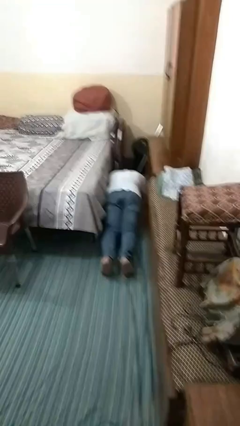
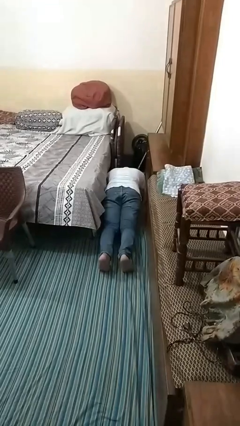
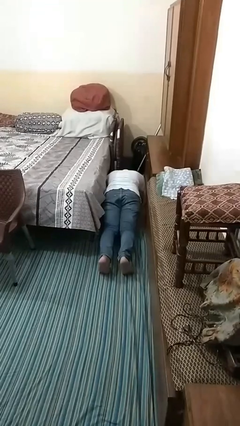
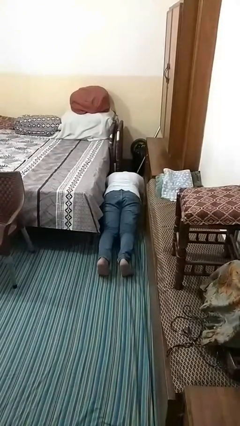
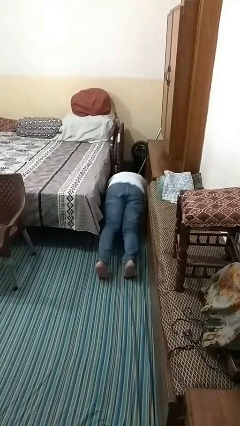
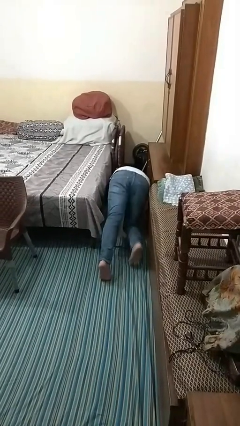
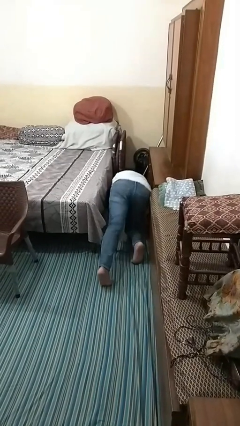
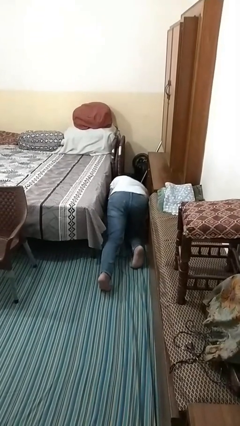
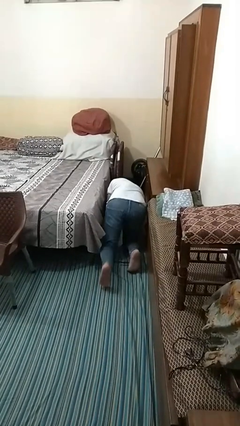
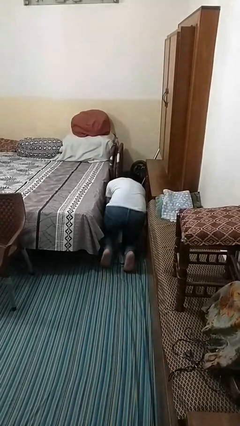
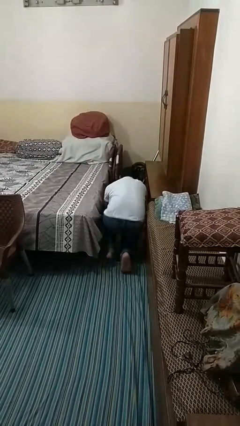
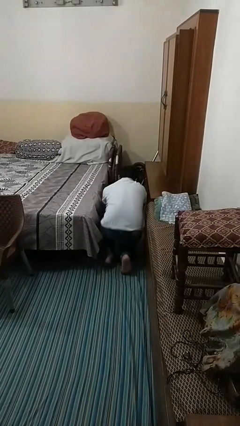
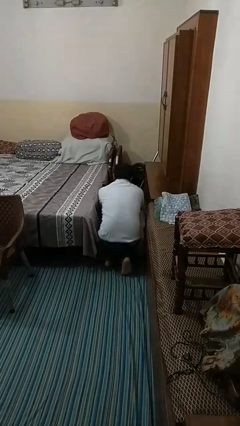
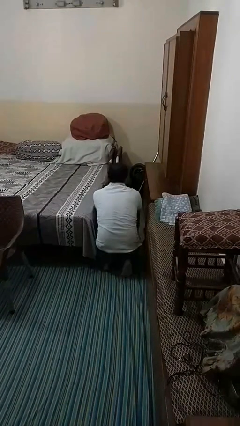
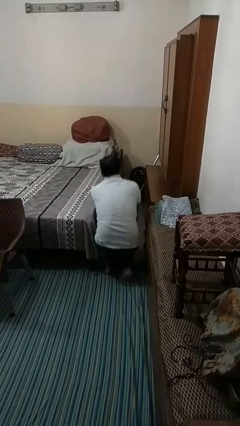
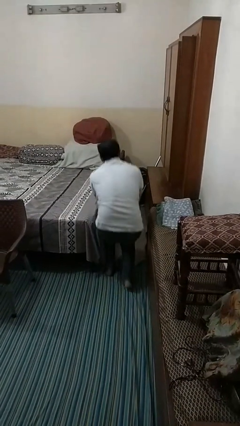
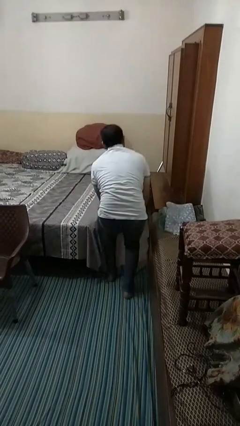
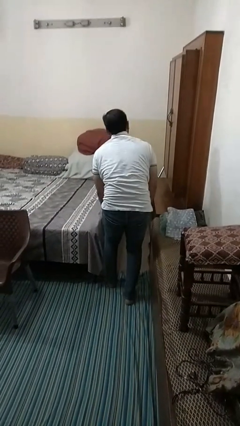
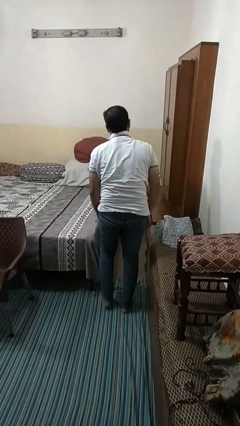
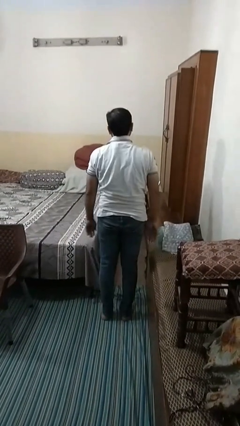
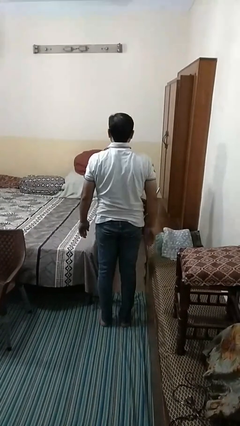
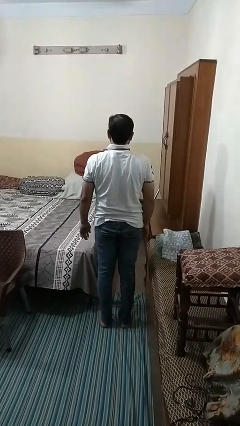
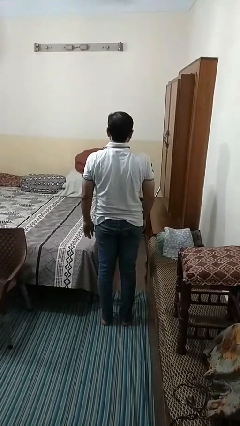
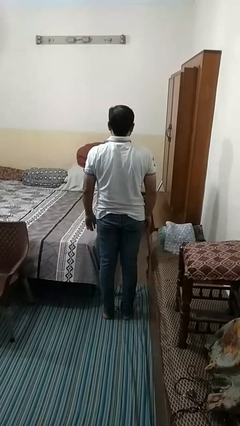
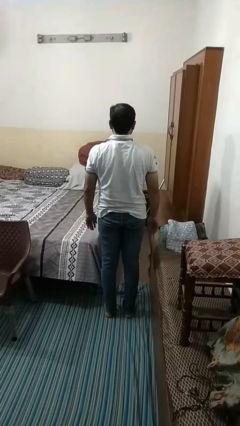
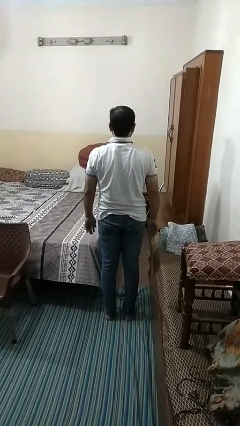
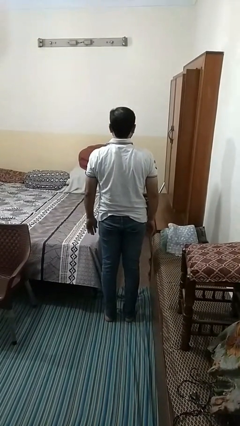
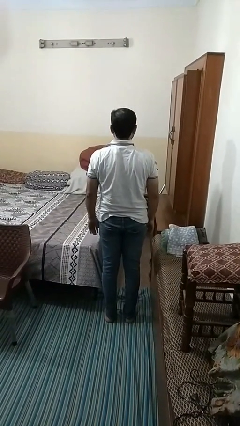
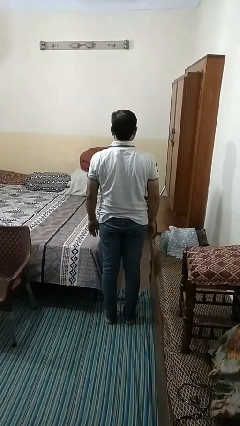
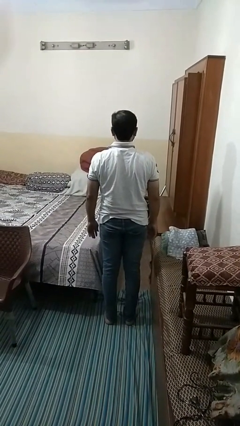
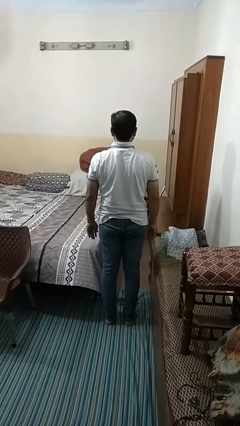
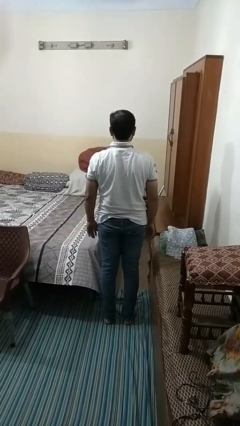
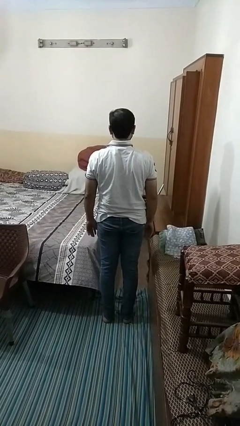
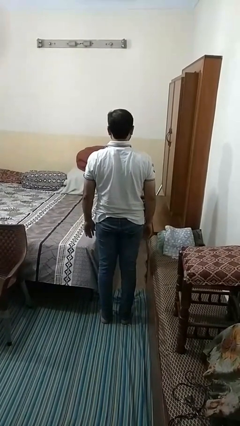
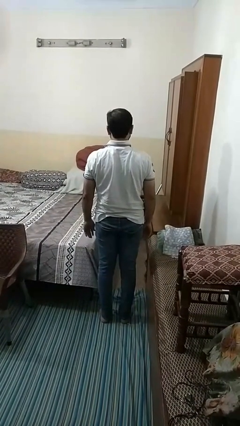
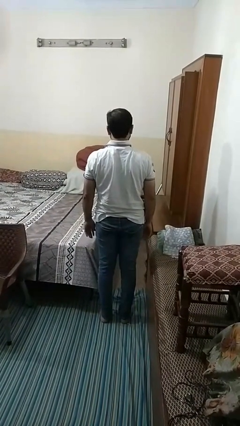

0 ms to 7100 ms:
person stands up from floor

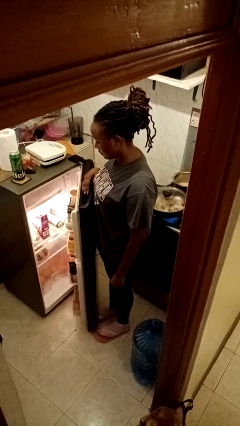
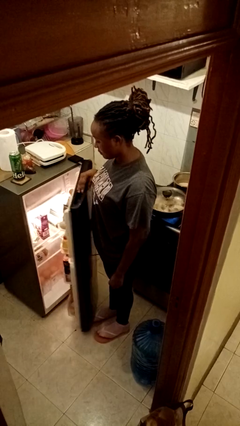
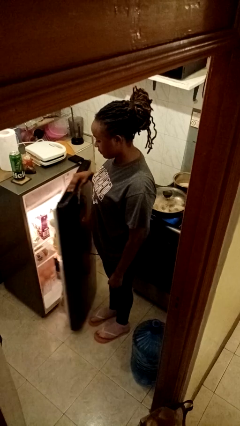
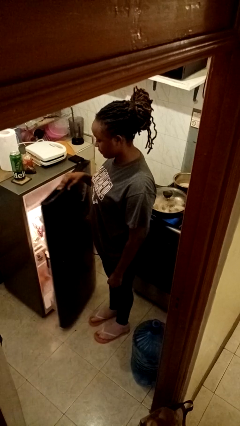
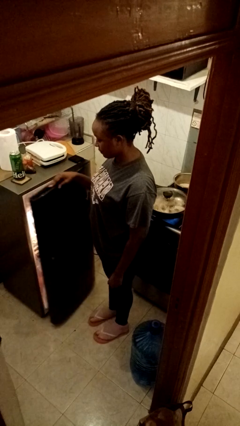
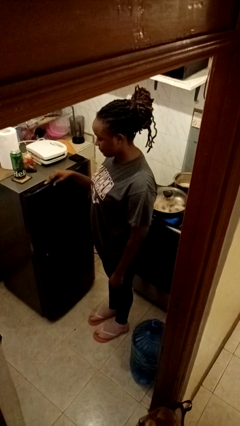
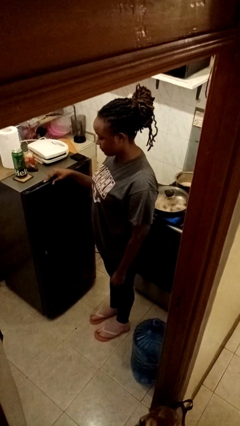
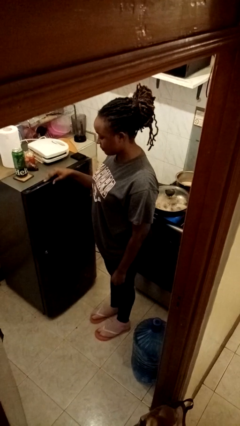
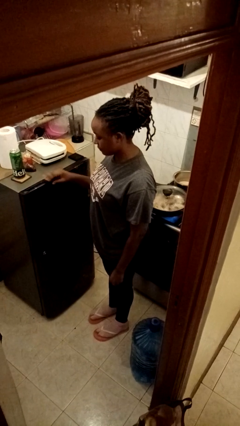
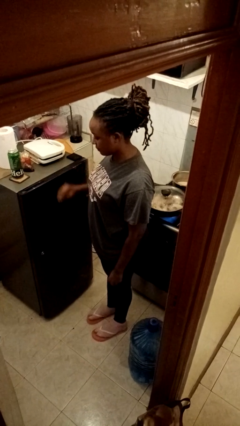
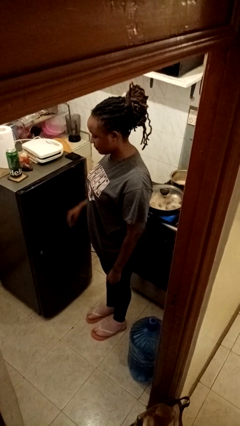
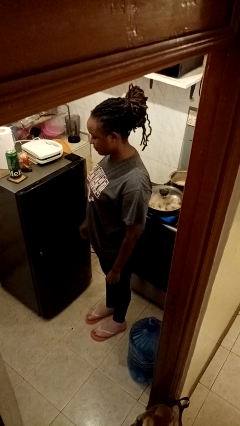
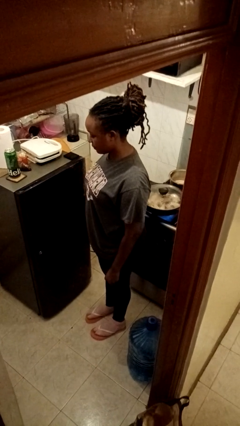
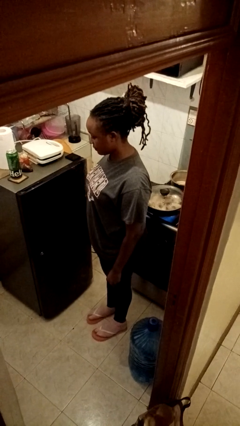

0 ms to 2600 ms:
person closes refrigerator

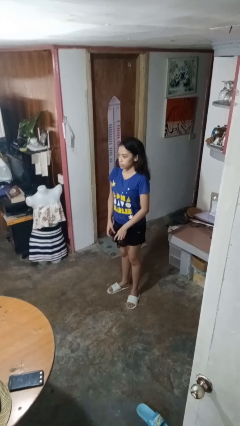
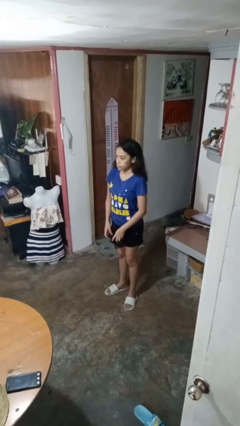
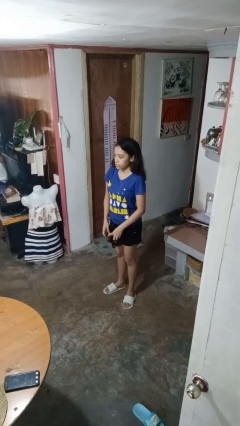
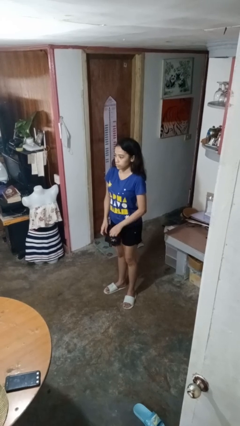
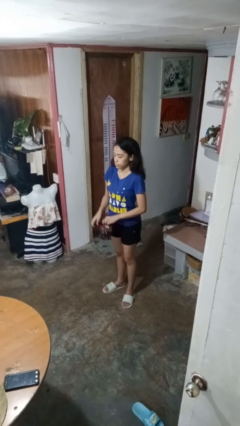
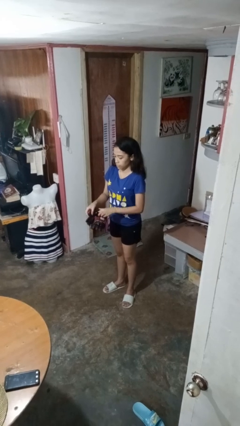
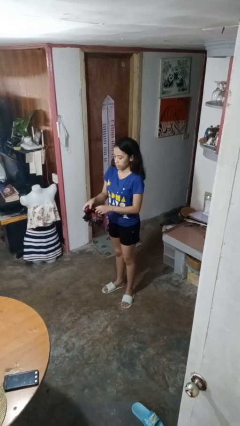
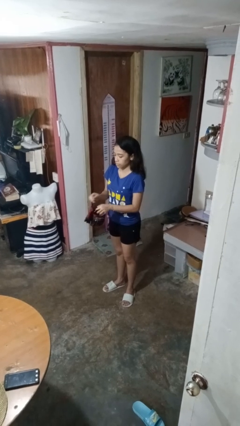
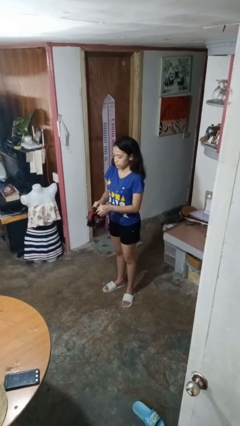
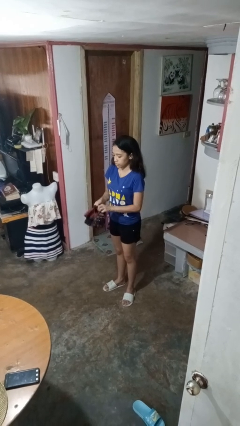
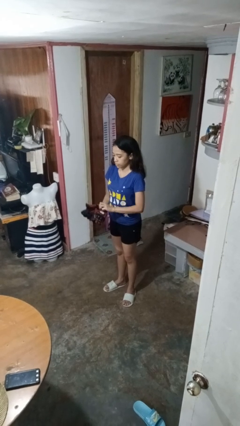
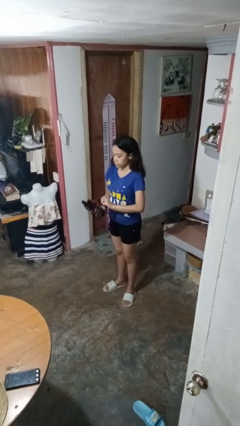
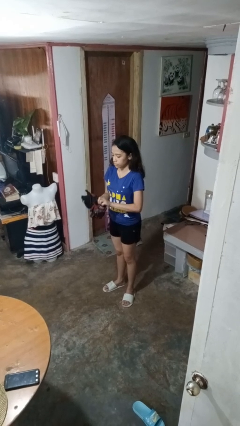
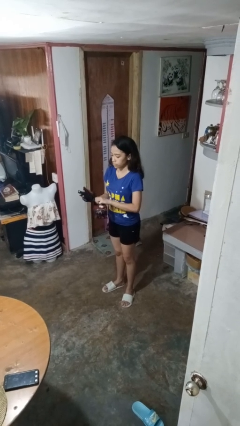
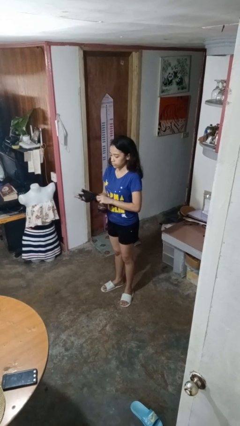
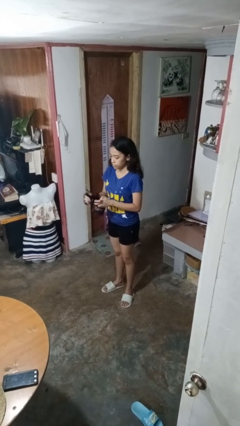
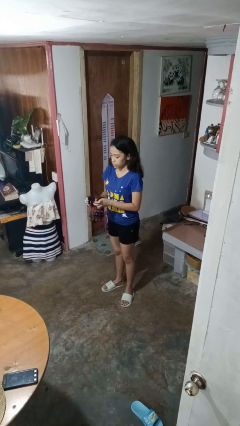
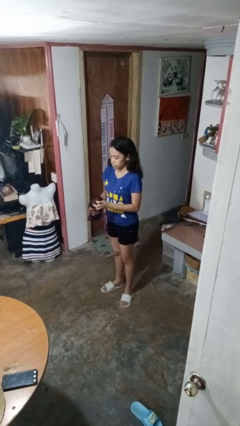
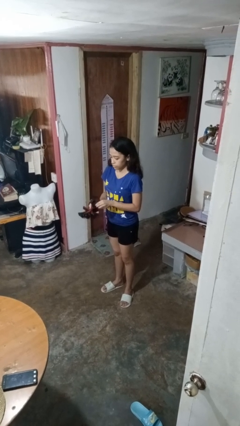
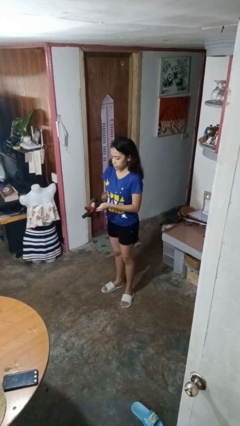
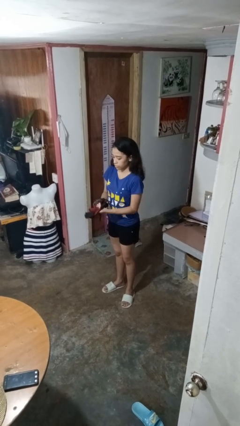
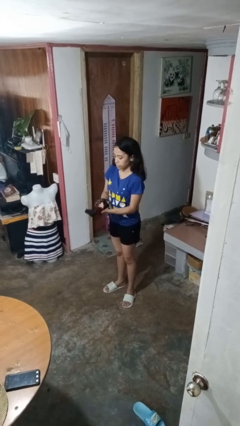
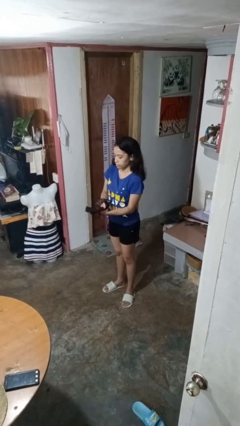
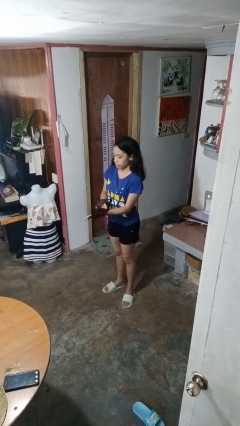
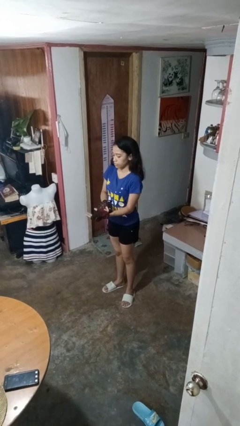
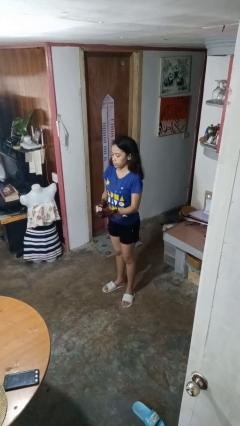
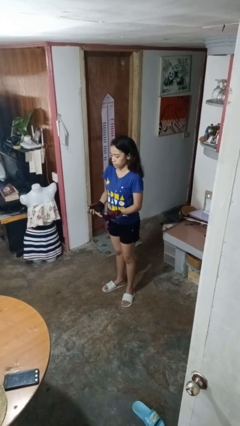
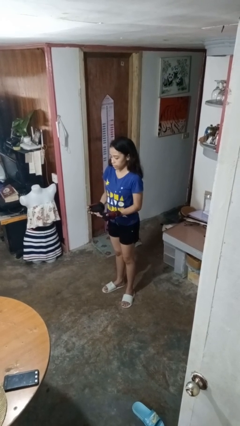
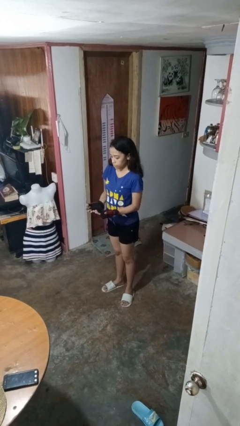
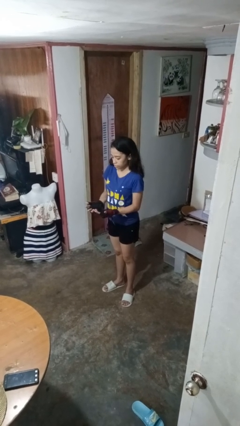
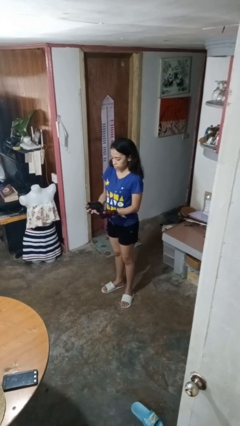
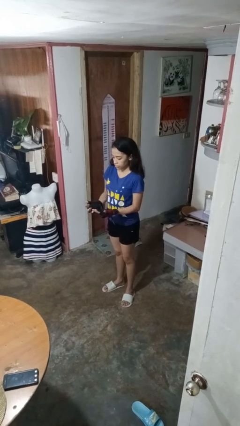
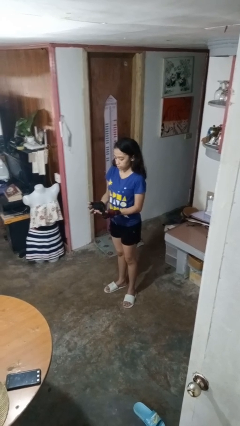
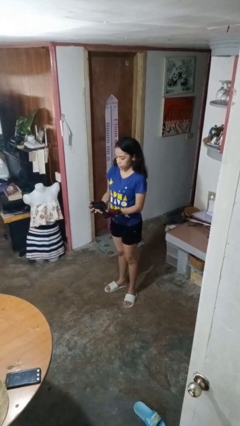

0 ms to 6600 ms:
person puts on gloves

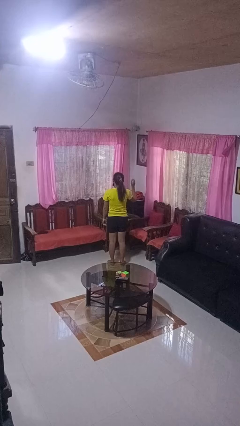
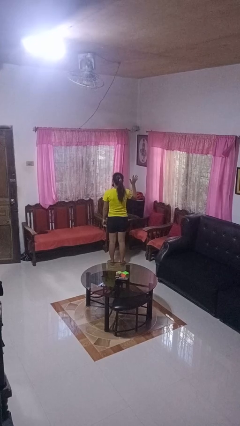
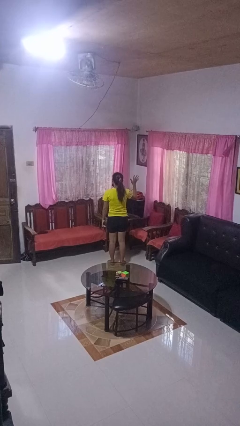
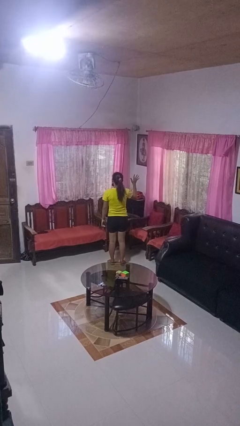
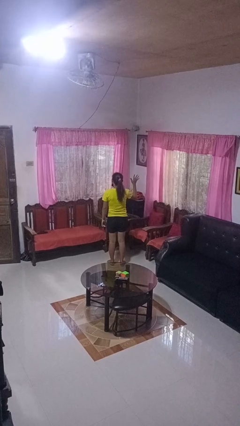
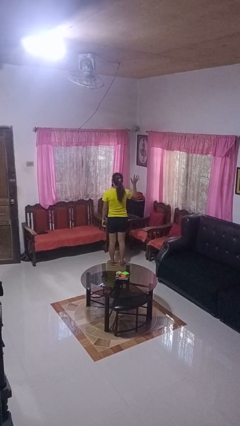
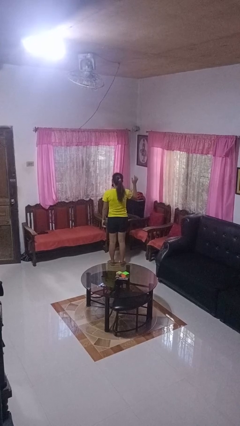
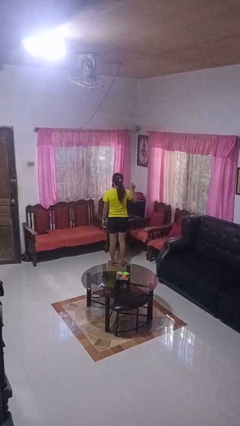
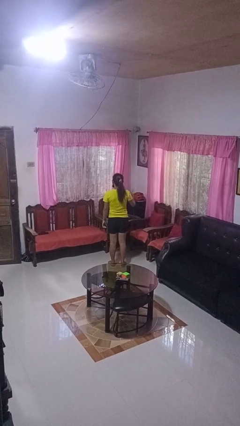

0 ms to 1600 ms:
person gestures number five
